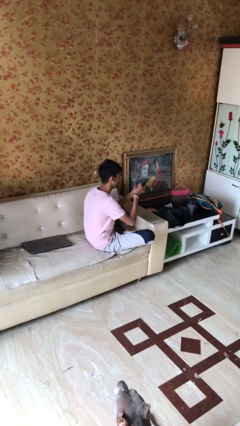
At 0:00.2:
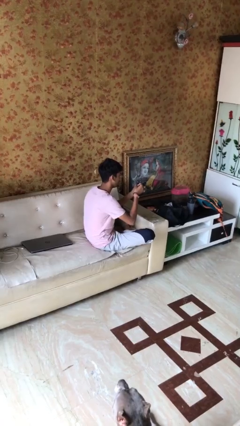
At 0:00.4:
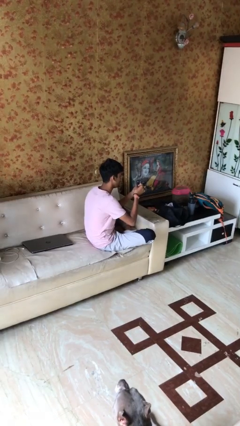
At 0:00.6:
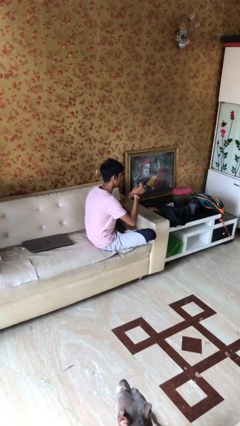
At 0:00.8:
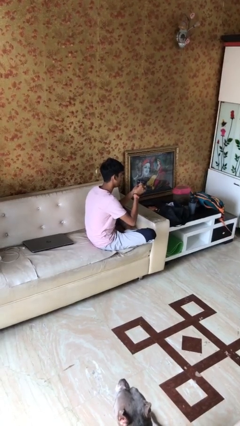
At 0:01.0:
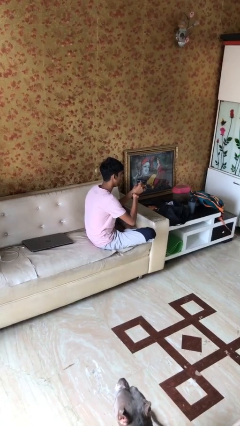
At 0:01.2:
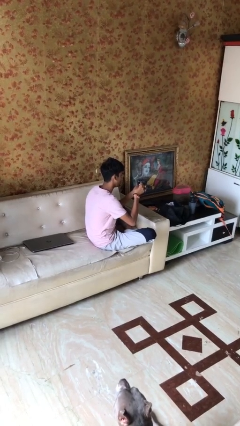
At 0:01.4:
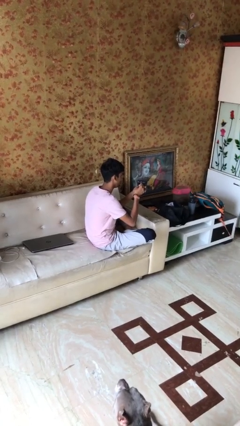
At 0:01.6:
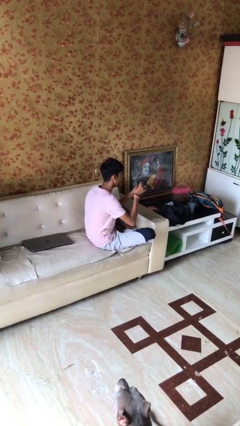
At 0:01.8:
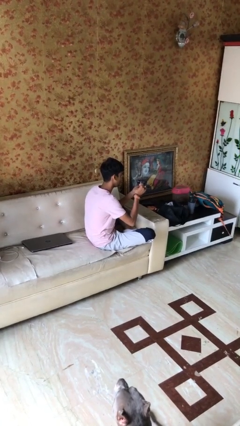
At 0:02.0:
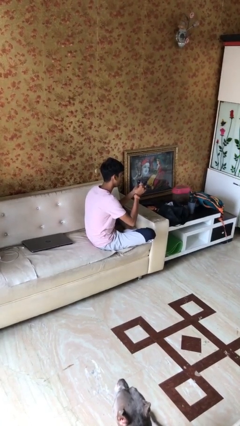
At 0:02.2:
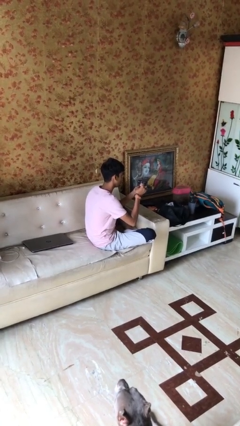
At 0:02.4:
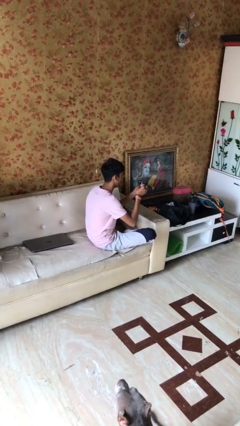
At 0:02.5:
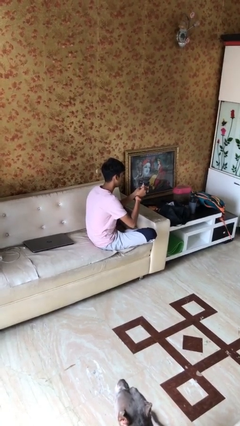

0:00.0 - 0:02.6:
person taps object with finger

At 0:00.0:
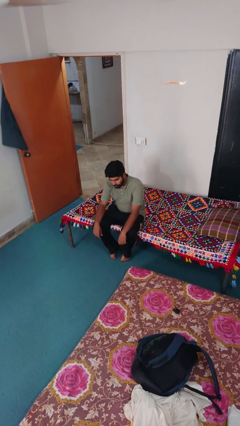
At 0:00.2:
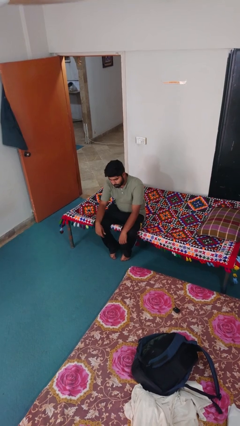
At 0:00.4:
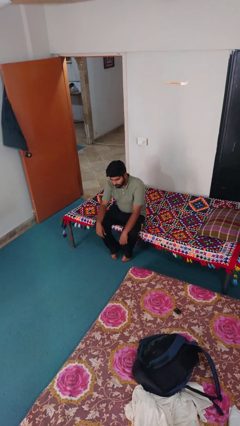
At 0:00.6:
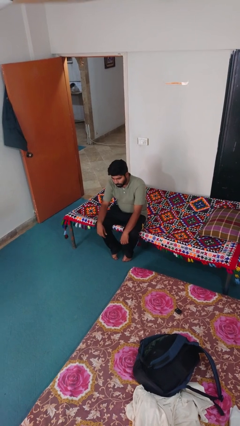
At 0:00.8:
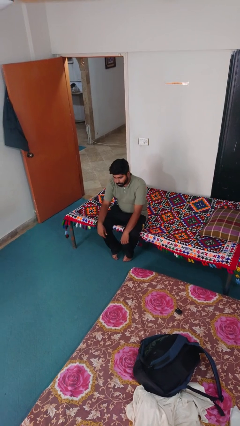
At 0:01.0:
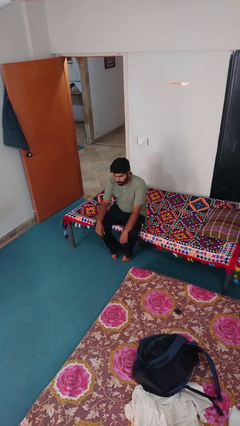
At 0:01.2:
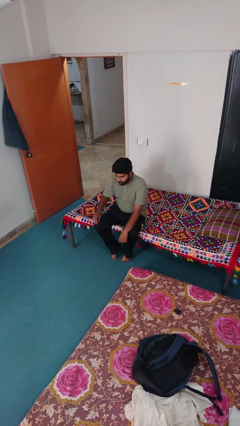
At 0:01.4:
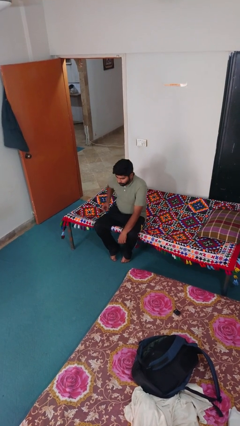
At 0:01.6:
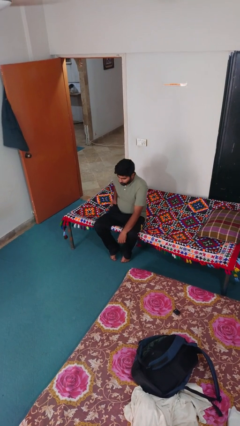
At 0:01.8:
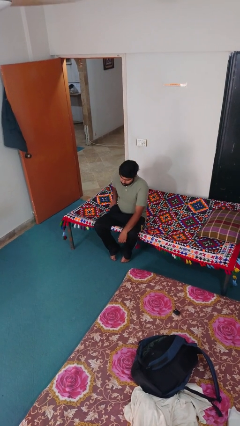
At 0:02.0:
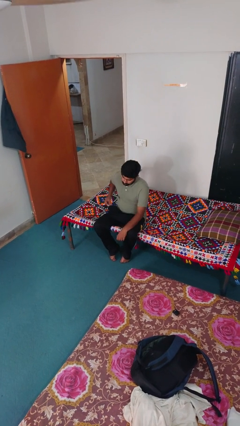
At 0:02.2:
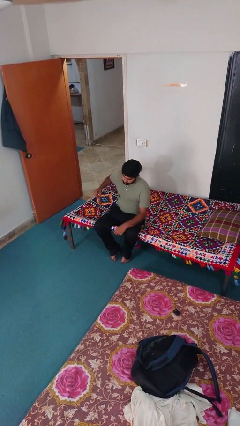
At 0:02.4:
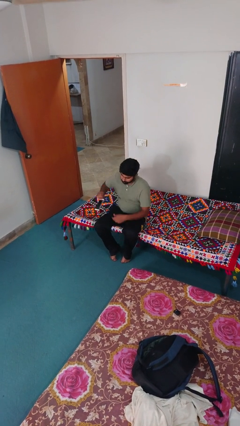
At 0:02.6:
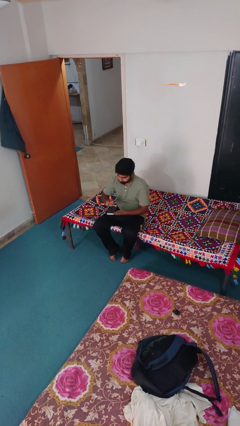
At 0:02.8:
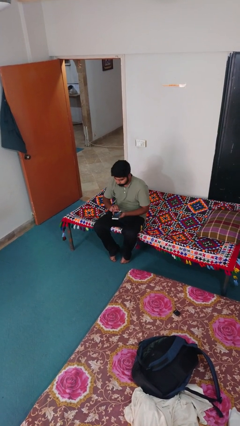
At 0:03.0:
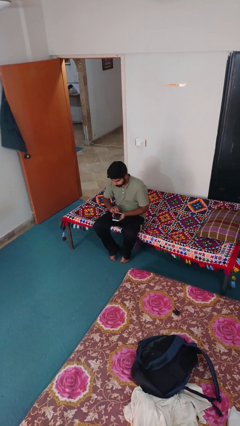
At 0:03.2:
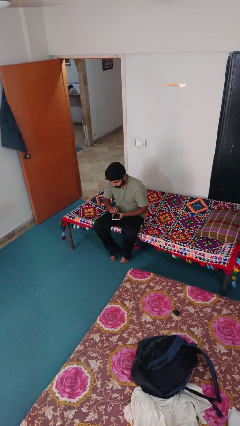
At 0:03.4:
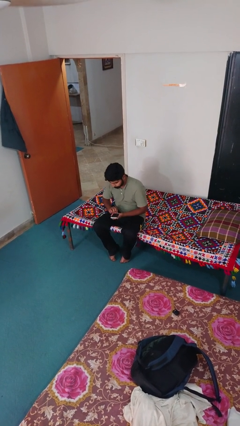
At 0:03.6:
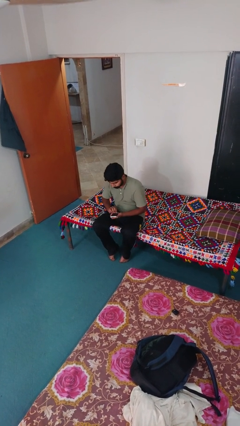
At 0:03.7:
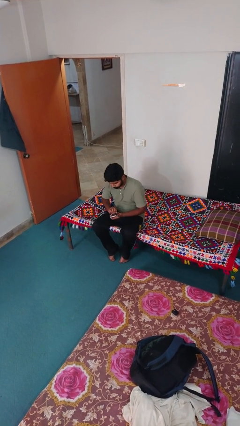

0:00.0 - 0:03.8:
person takes phone from pocket

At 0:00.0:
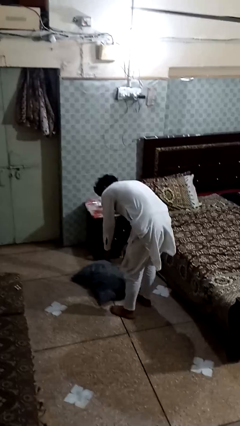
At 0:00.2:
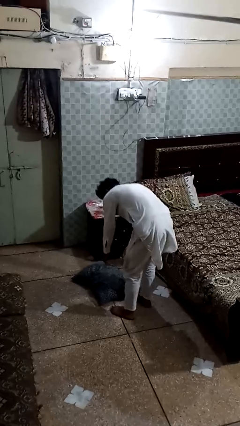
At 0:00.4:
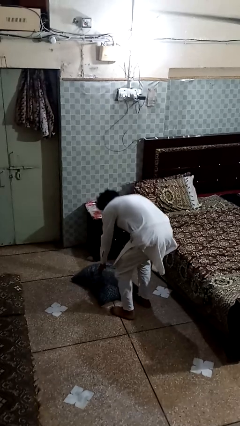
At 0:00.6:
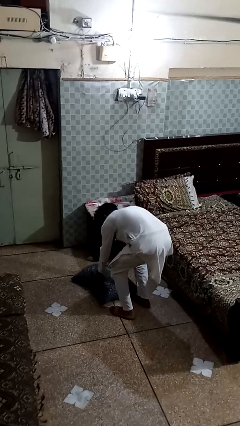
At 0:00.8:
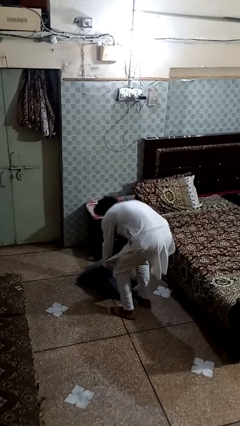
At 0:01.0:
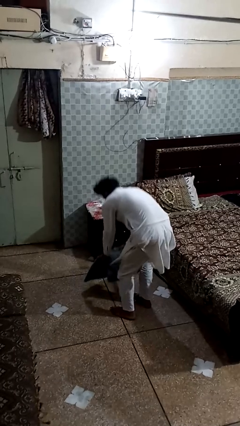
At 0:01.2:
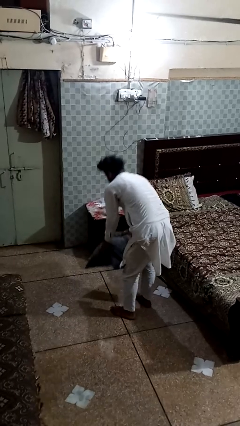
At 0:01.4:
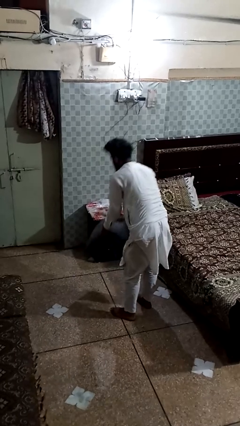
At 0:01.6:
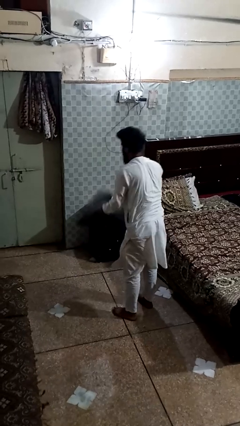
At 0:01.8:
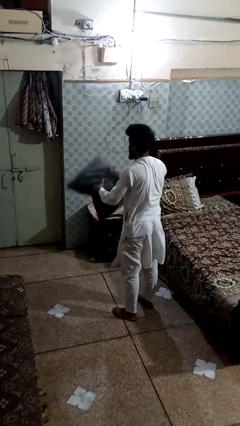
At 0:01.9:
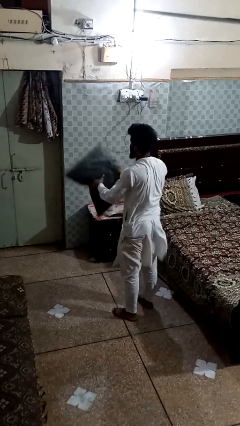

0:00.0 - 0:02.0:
person picks up object from floor

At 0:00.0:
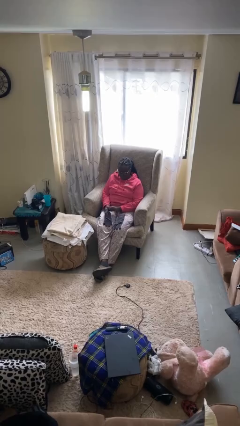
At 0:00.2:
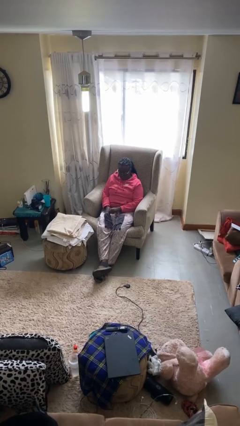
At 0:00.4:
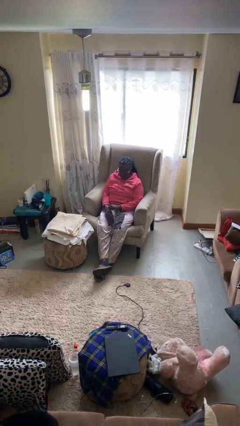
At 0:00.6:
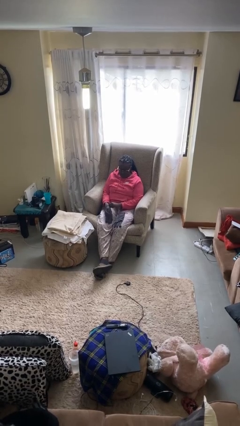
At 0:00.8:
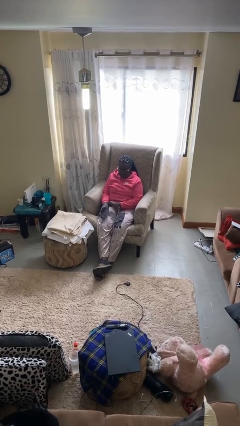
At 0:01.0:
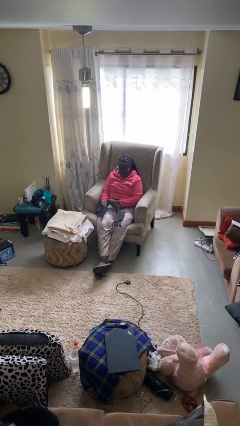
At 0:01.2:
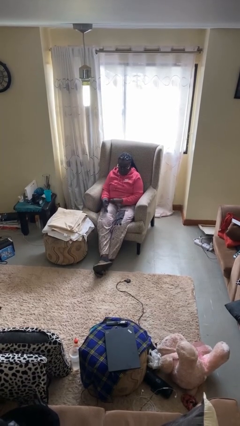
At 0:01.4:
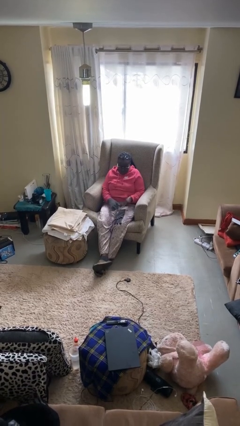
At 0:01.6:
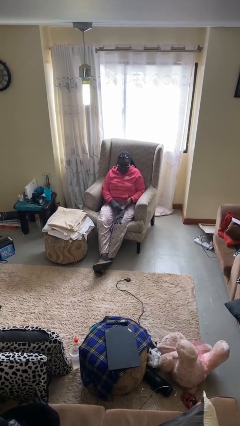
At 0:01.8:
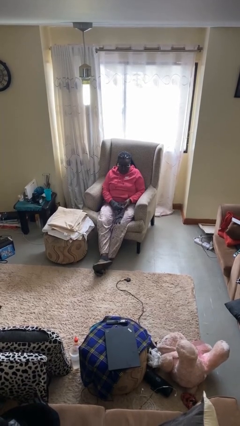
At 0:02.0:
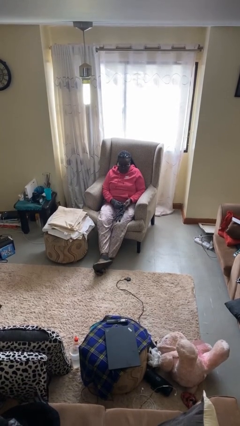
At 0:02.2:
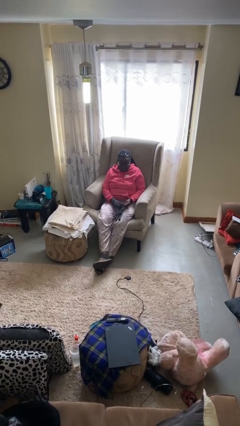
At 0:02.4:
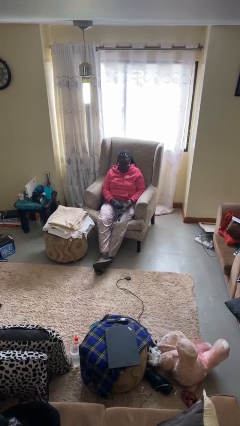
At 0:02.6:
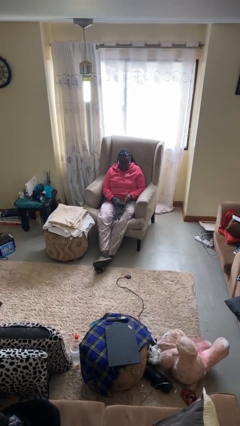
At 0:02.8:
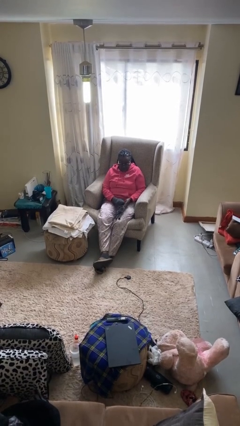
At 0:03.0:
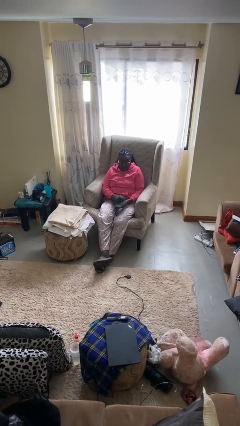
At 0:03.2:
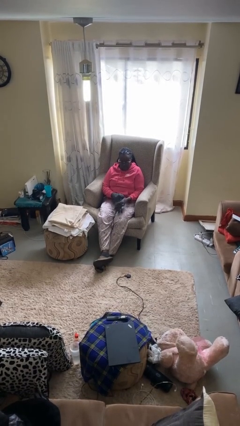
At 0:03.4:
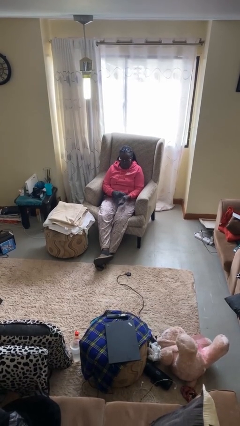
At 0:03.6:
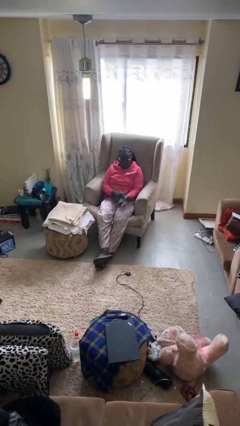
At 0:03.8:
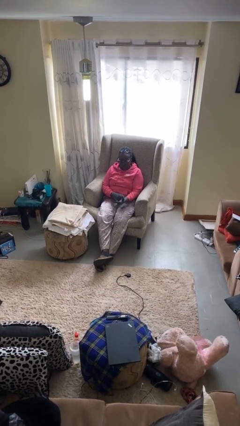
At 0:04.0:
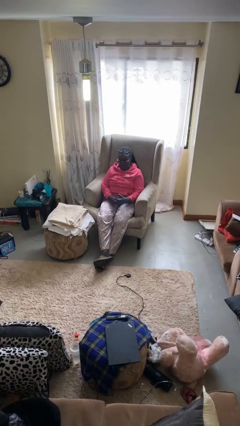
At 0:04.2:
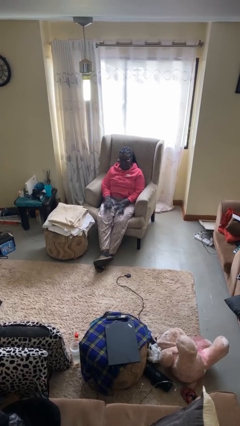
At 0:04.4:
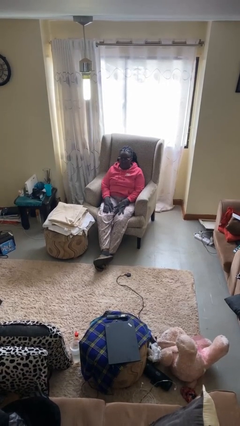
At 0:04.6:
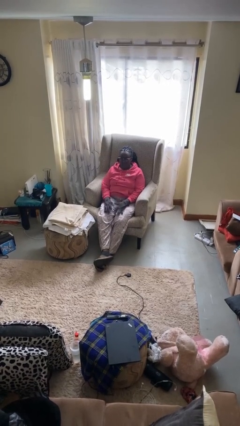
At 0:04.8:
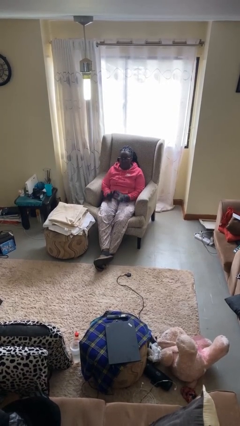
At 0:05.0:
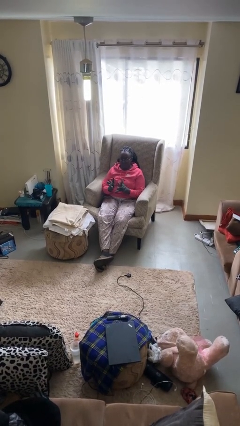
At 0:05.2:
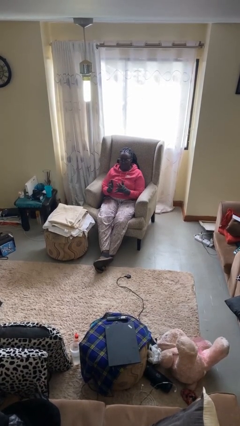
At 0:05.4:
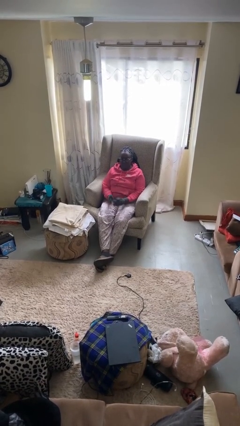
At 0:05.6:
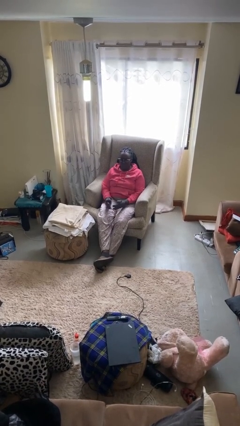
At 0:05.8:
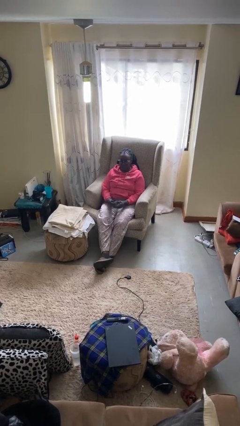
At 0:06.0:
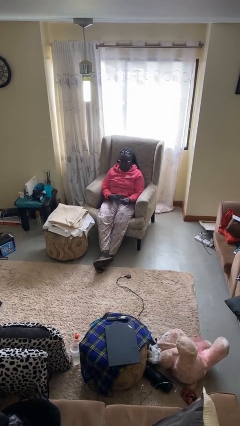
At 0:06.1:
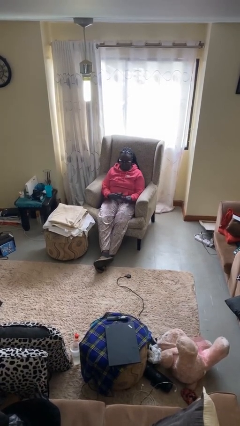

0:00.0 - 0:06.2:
person puts on gloves

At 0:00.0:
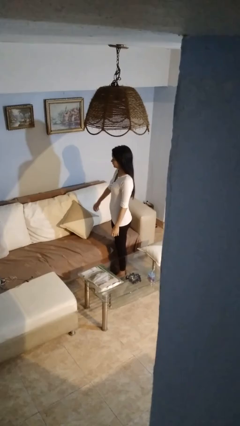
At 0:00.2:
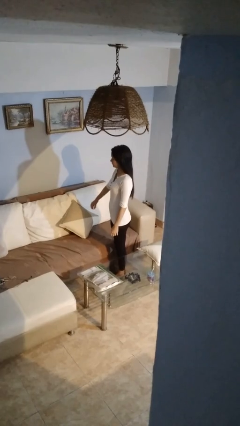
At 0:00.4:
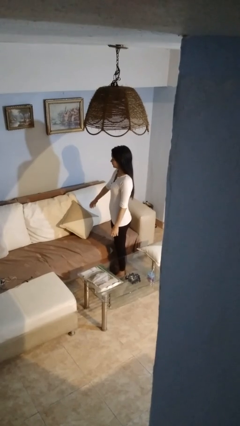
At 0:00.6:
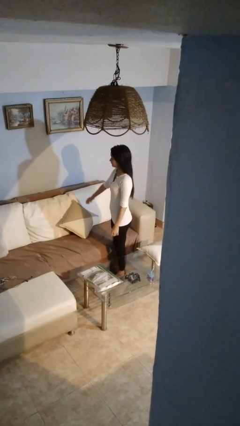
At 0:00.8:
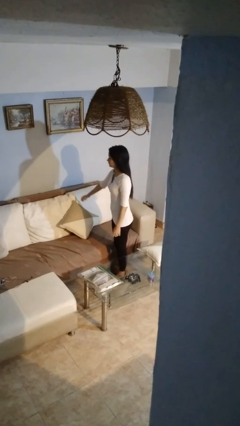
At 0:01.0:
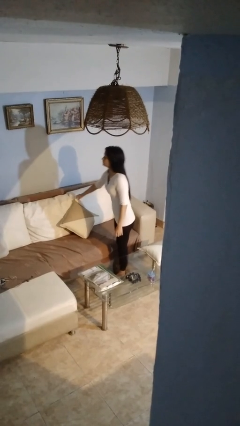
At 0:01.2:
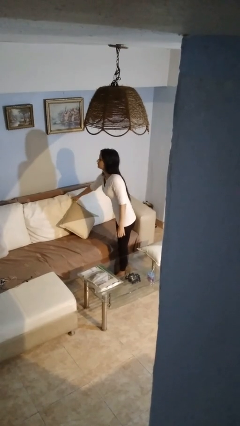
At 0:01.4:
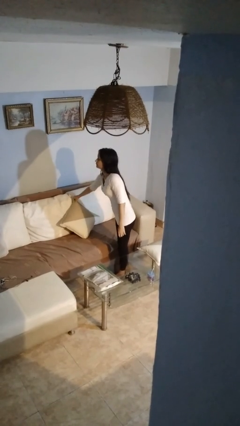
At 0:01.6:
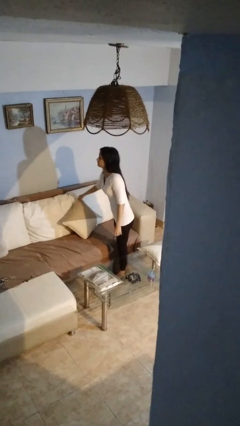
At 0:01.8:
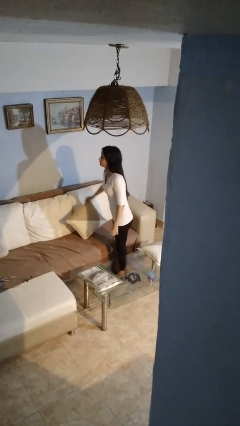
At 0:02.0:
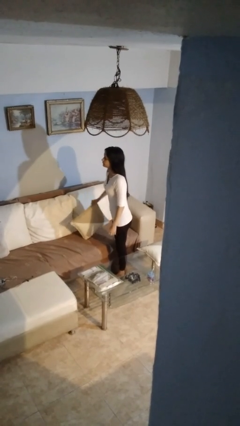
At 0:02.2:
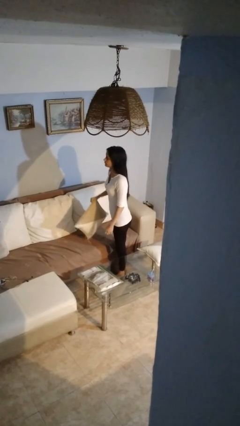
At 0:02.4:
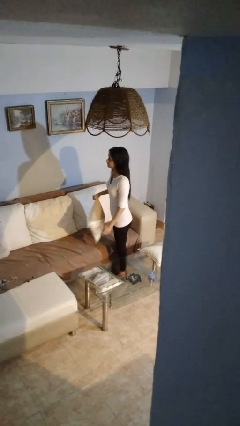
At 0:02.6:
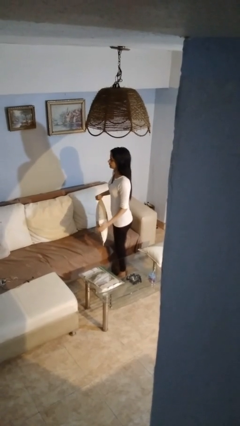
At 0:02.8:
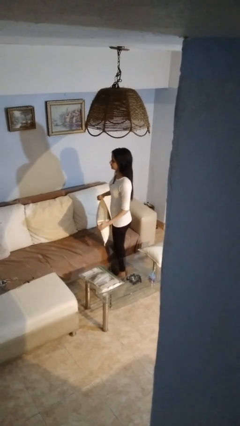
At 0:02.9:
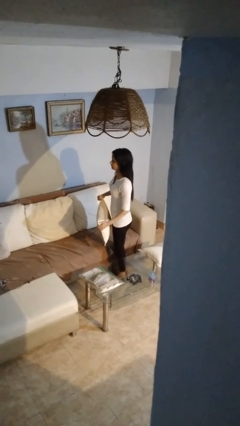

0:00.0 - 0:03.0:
person puts down object on couch
